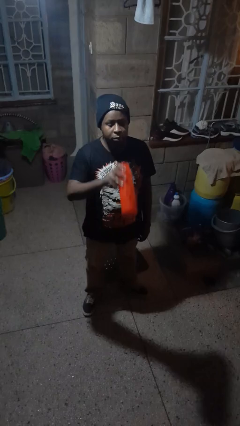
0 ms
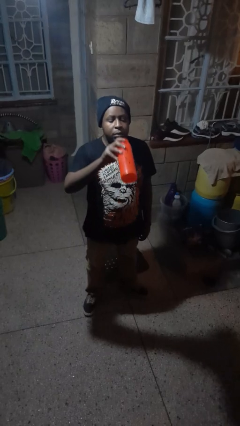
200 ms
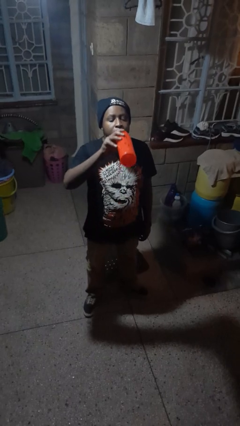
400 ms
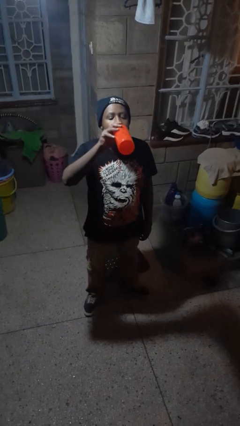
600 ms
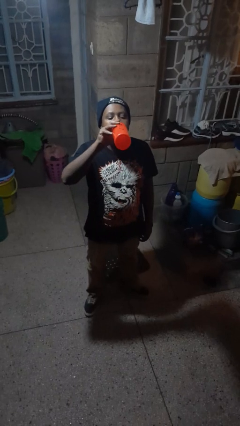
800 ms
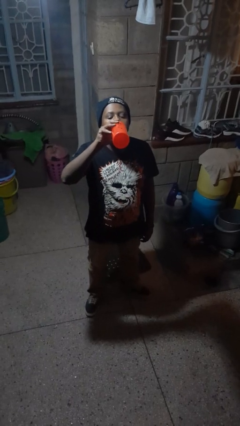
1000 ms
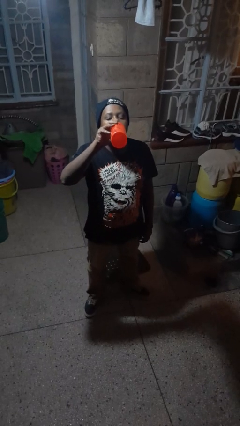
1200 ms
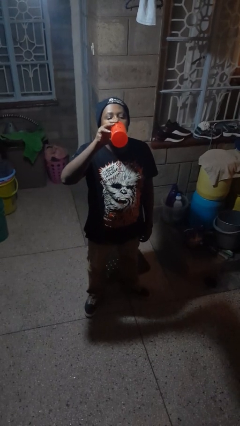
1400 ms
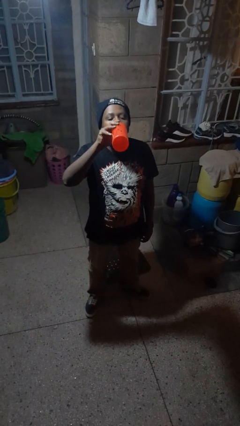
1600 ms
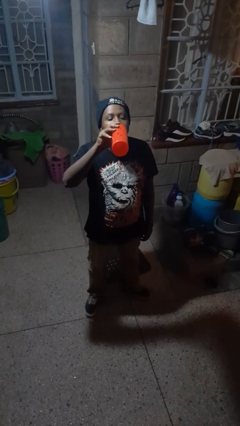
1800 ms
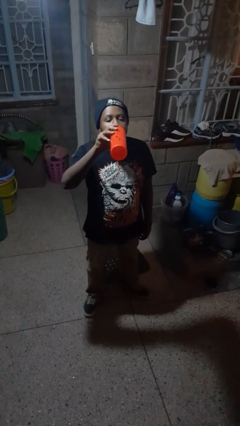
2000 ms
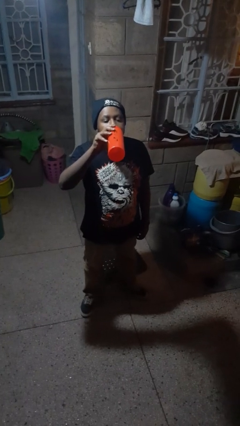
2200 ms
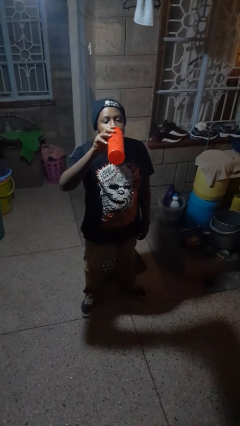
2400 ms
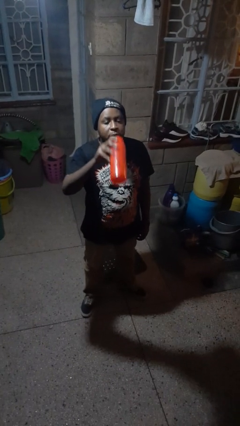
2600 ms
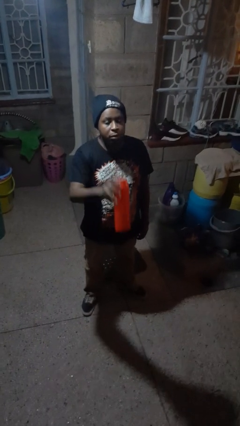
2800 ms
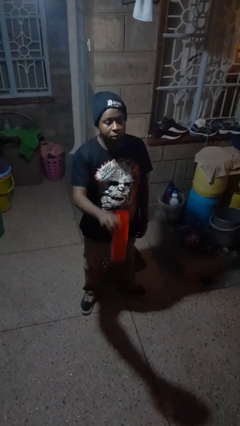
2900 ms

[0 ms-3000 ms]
person drinks from bottle

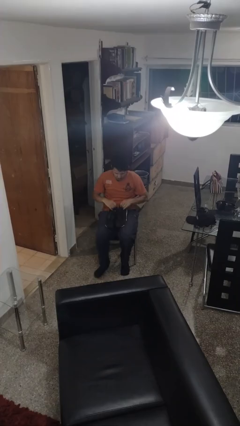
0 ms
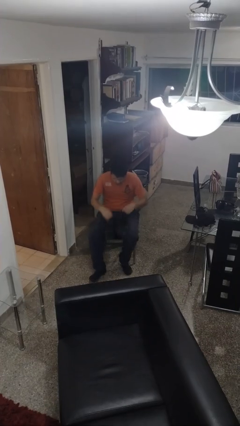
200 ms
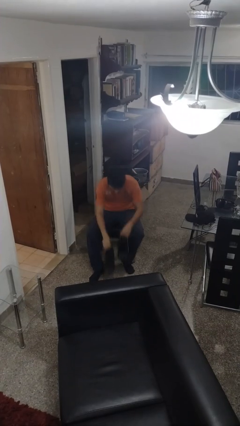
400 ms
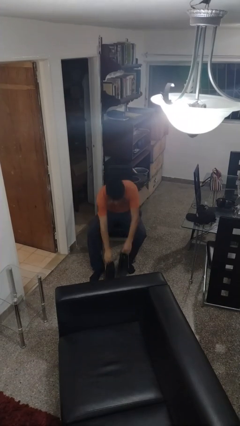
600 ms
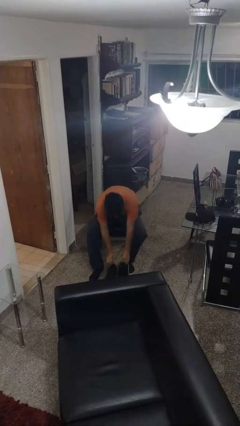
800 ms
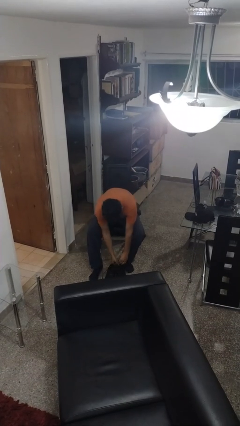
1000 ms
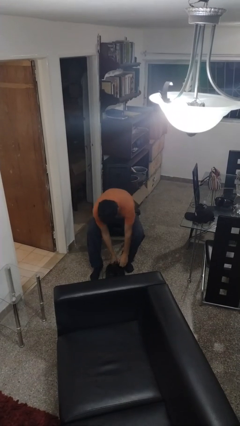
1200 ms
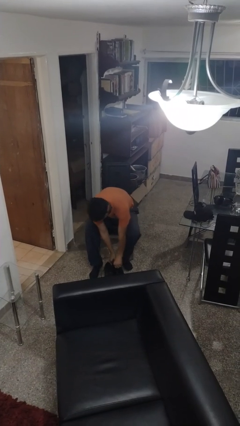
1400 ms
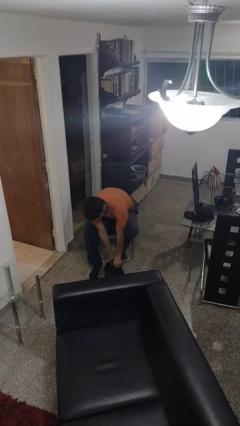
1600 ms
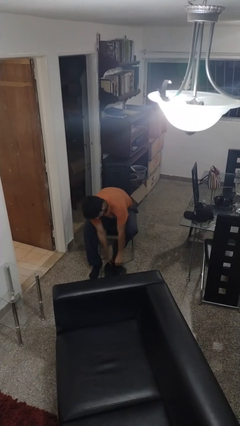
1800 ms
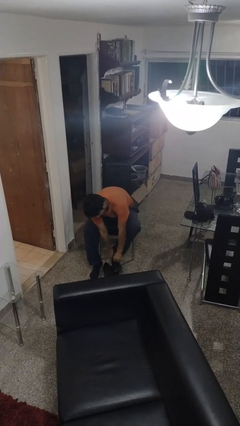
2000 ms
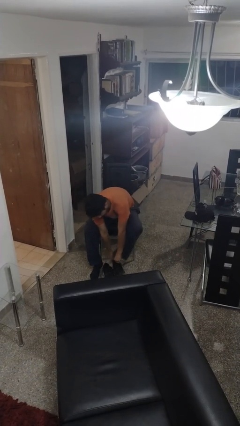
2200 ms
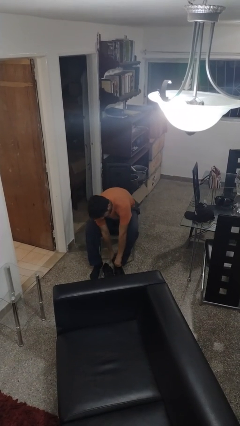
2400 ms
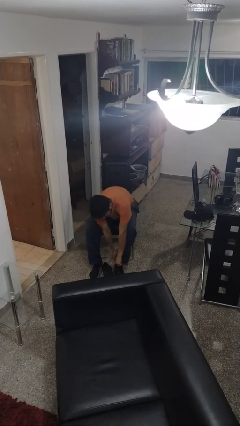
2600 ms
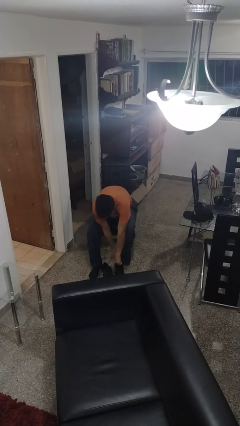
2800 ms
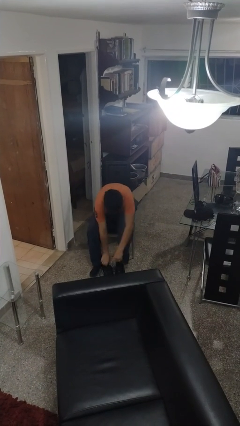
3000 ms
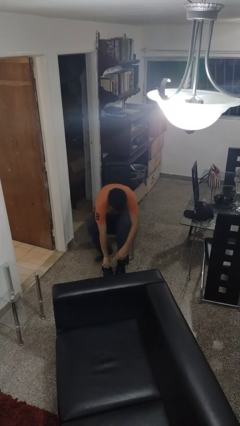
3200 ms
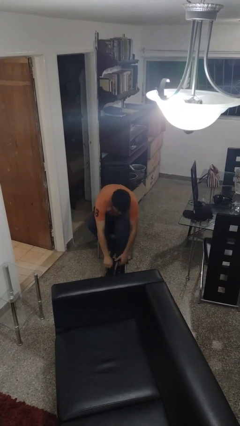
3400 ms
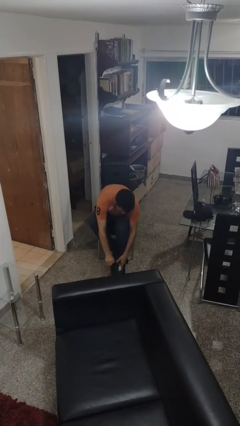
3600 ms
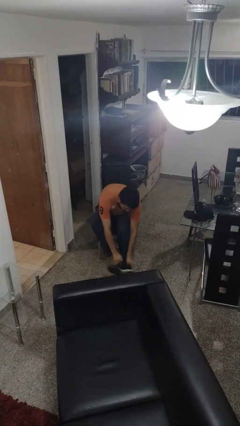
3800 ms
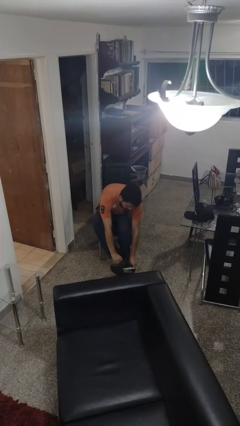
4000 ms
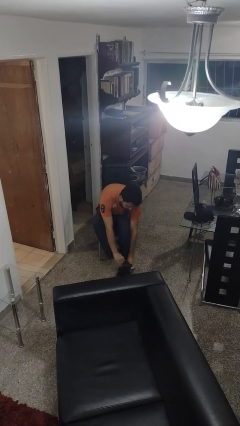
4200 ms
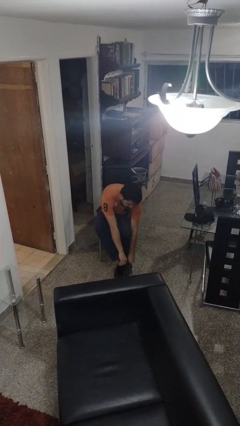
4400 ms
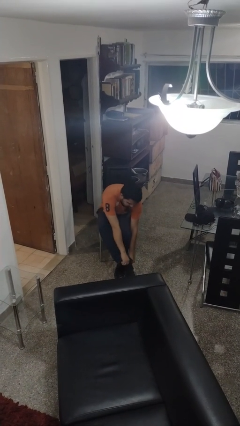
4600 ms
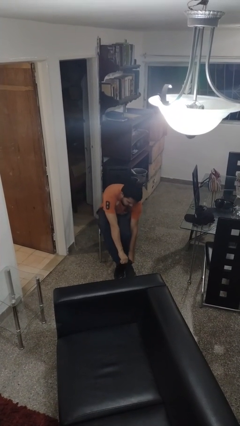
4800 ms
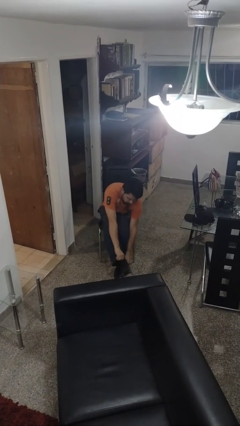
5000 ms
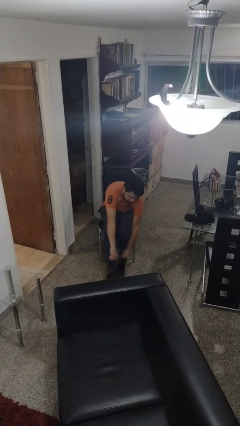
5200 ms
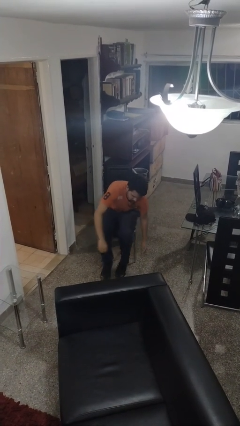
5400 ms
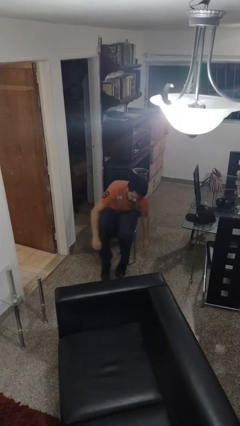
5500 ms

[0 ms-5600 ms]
person puts on shoes

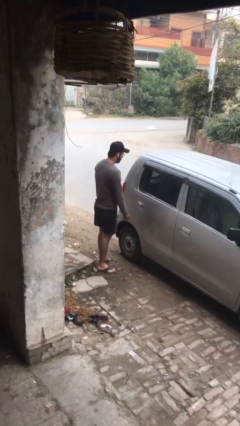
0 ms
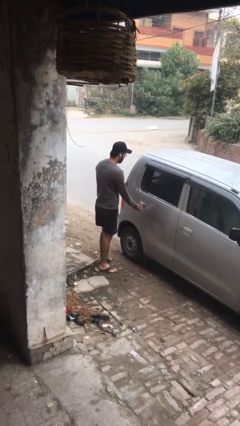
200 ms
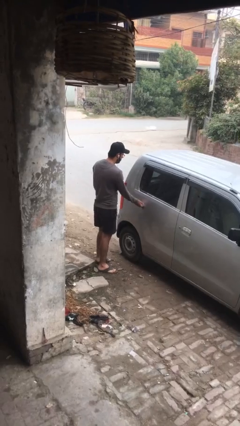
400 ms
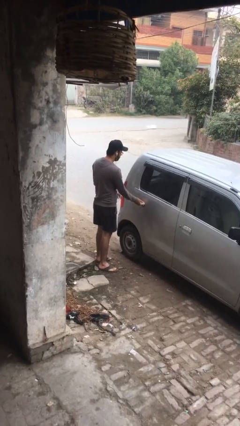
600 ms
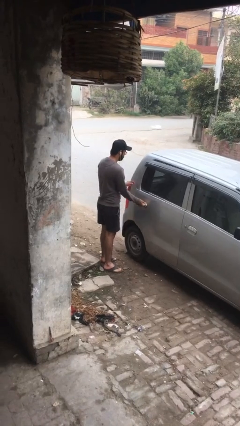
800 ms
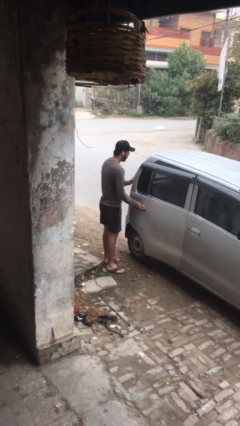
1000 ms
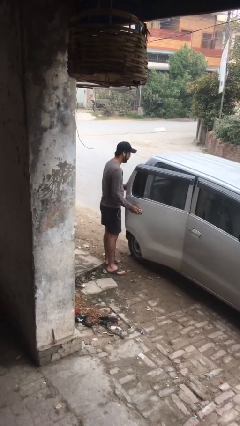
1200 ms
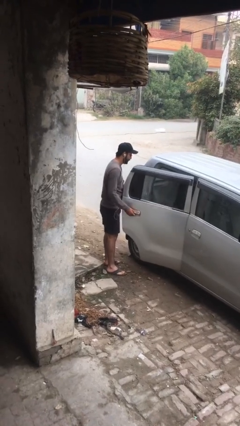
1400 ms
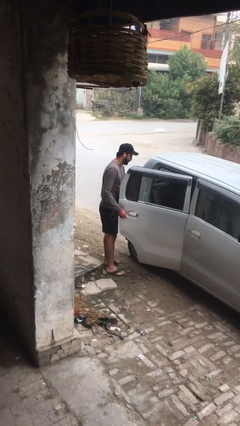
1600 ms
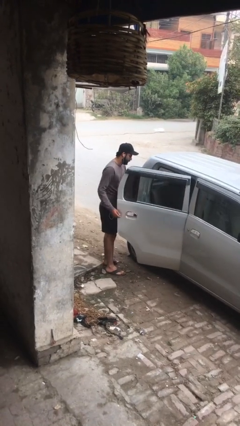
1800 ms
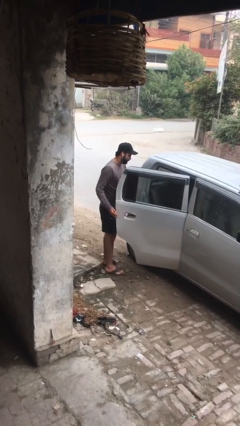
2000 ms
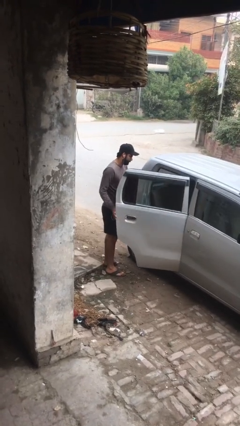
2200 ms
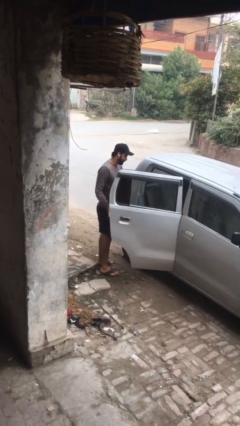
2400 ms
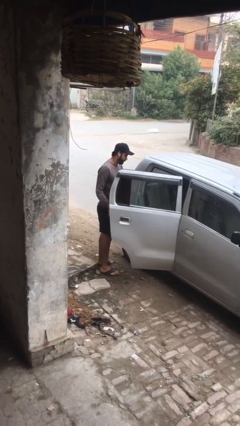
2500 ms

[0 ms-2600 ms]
person opens car door

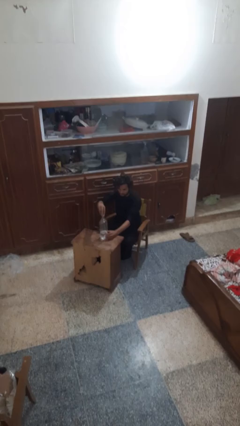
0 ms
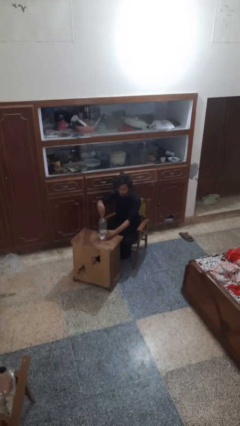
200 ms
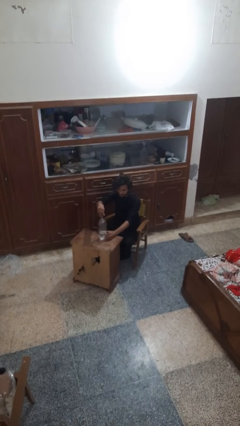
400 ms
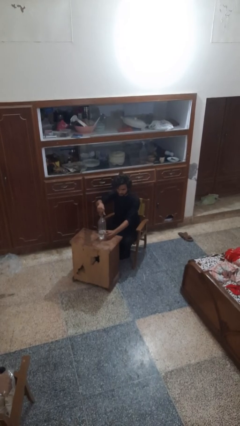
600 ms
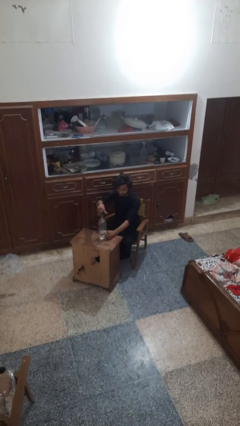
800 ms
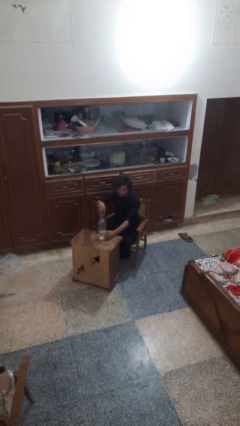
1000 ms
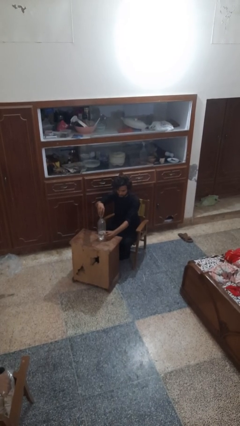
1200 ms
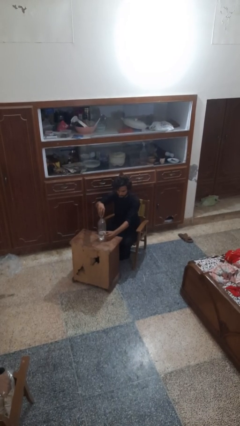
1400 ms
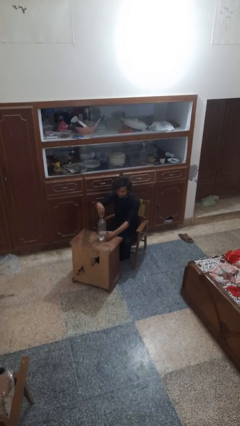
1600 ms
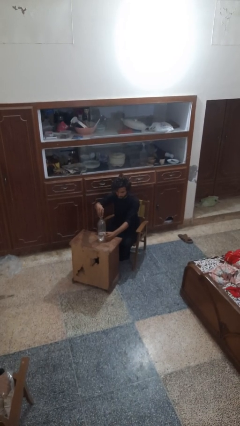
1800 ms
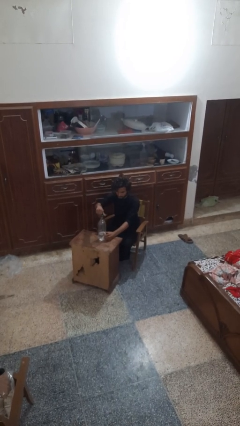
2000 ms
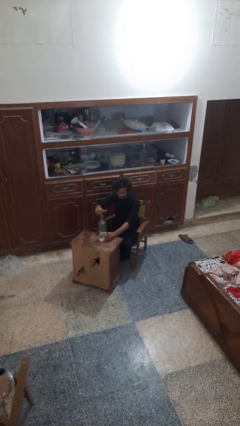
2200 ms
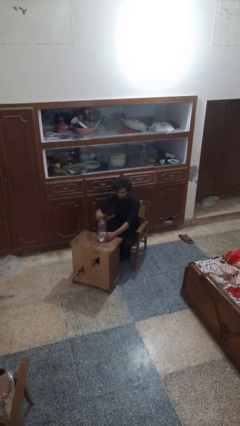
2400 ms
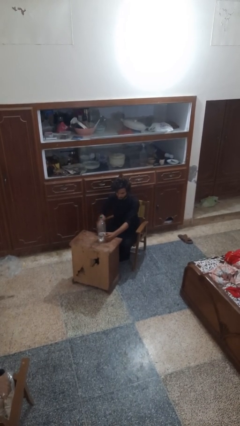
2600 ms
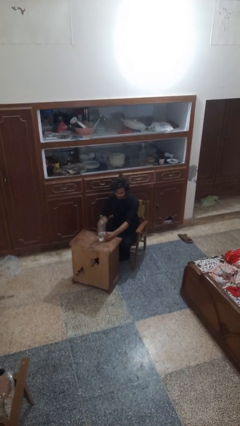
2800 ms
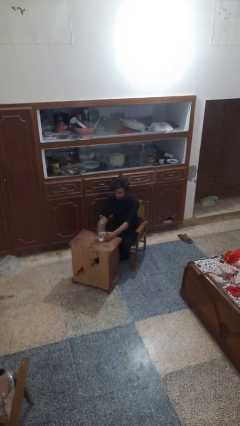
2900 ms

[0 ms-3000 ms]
person screws lid to bottle

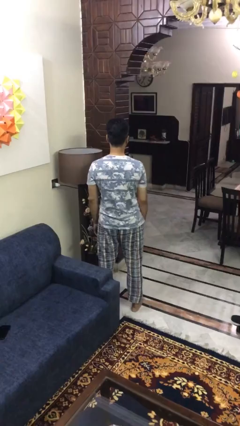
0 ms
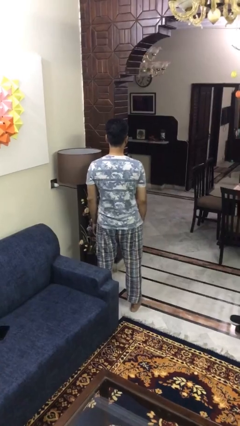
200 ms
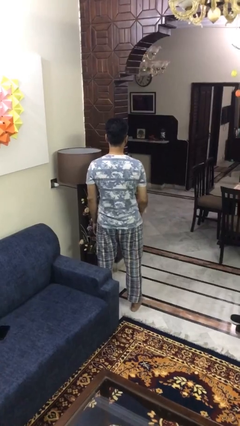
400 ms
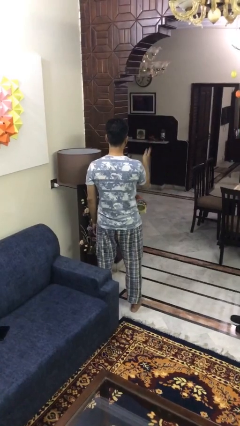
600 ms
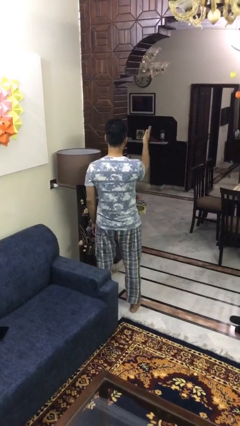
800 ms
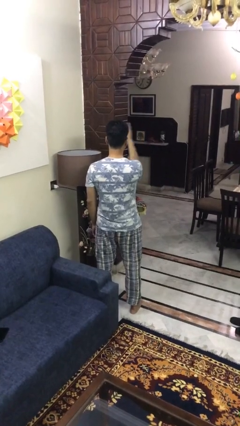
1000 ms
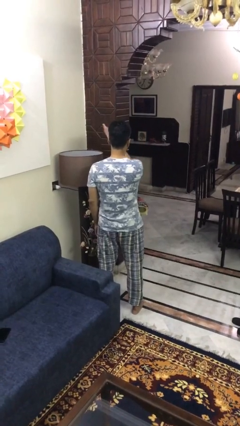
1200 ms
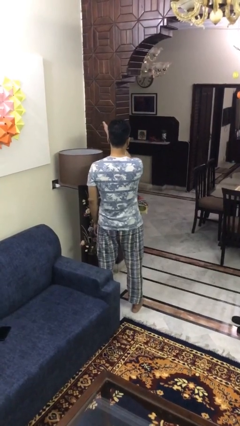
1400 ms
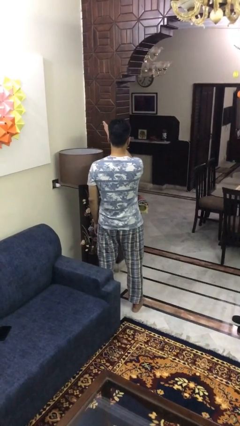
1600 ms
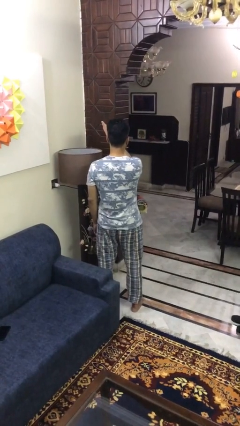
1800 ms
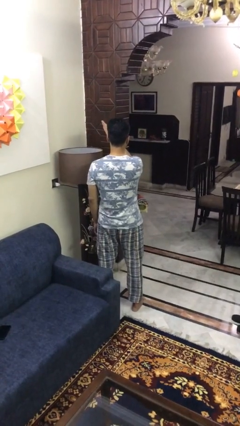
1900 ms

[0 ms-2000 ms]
person gestures swipe left

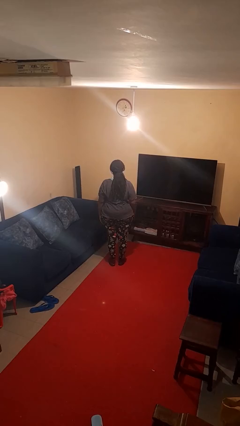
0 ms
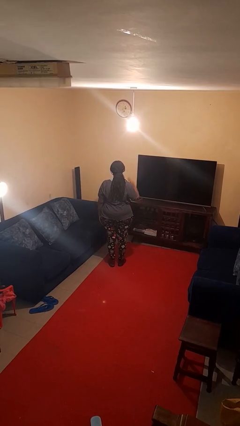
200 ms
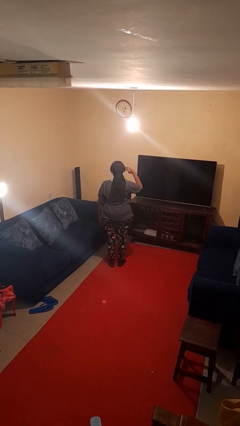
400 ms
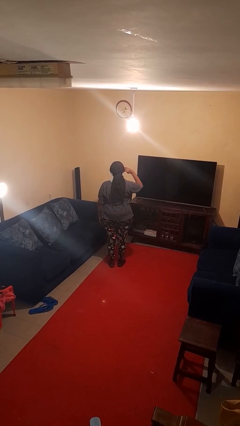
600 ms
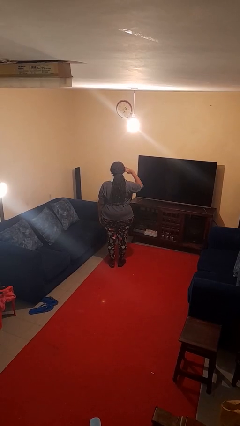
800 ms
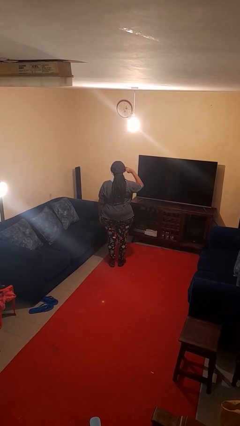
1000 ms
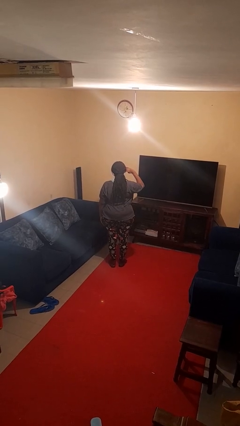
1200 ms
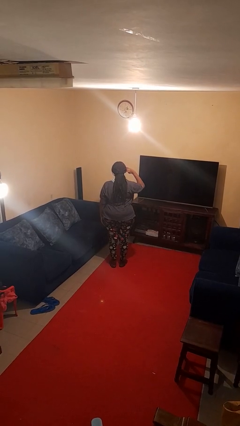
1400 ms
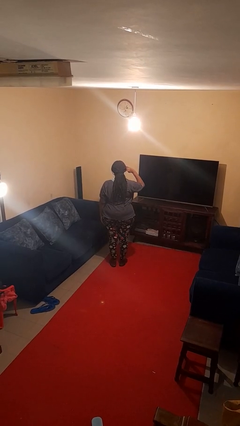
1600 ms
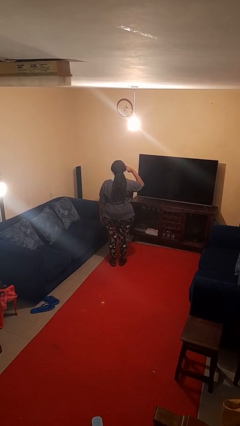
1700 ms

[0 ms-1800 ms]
person salutes
